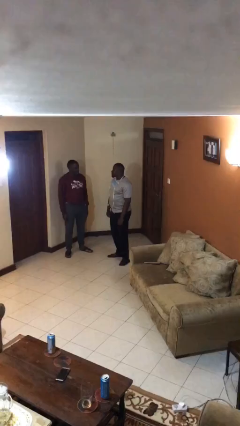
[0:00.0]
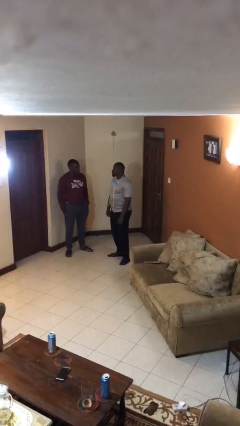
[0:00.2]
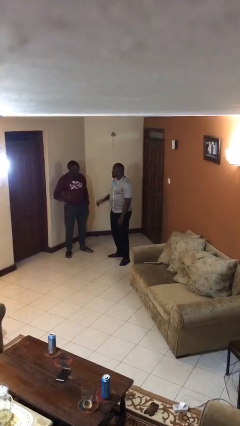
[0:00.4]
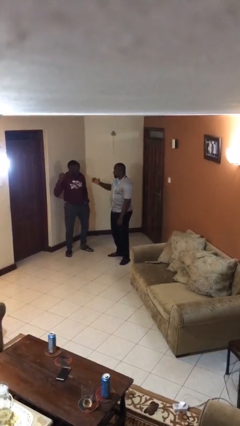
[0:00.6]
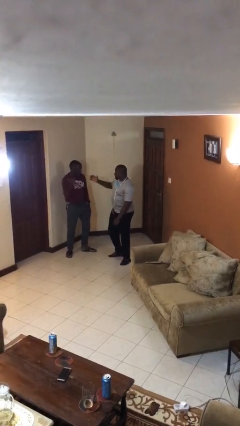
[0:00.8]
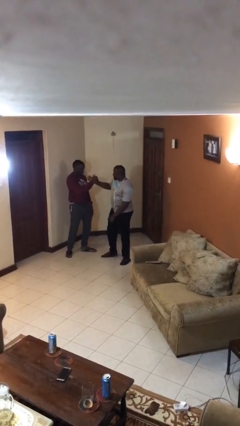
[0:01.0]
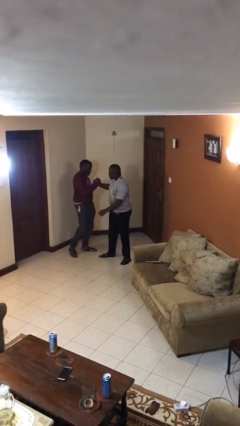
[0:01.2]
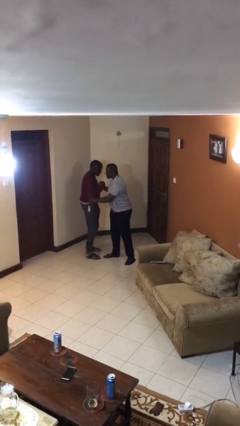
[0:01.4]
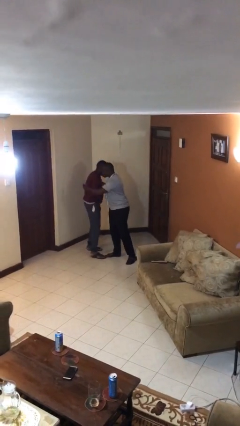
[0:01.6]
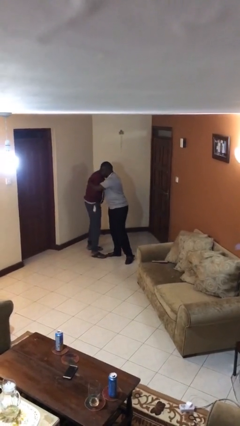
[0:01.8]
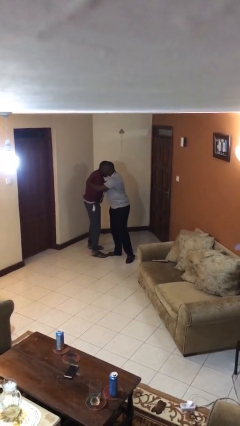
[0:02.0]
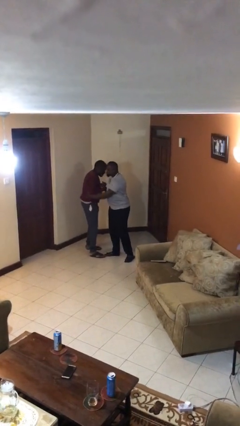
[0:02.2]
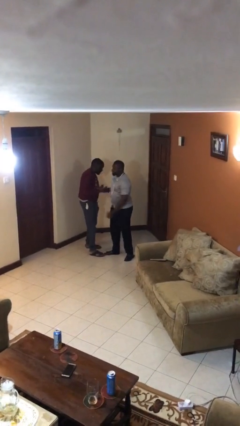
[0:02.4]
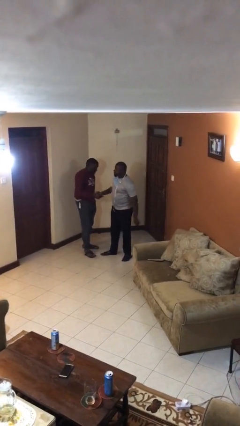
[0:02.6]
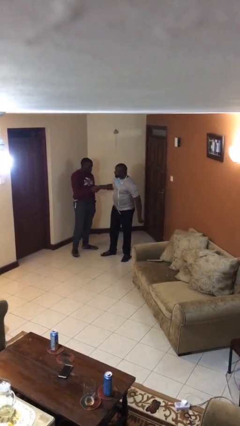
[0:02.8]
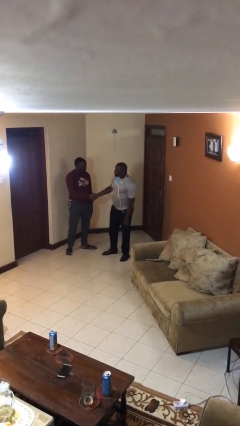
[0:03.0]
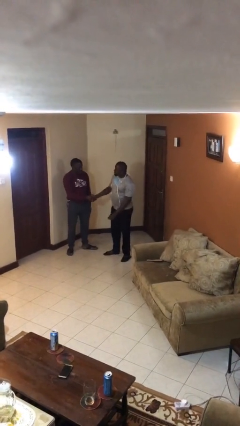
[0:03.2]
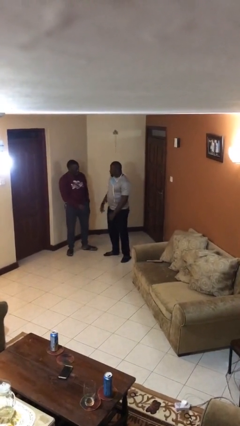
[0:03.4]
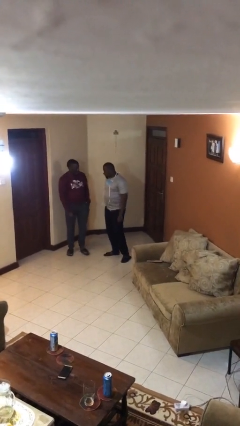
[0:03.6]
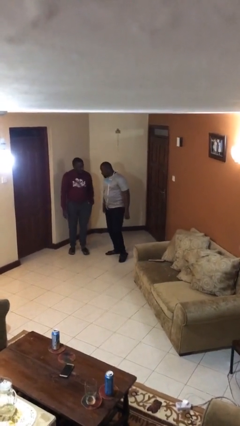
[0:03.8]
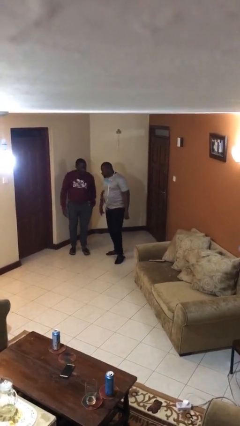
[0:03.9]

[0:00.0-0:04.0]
person embraces person

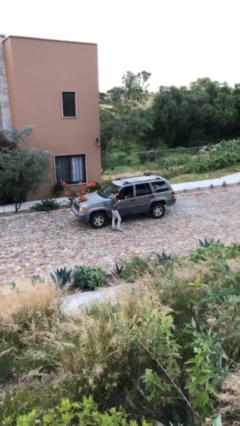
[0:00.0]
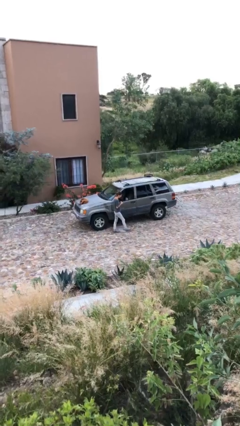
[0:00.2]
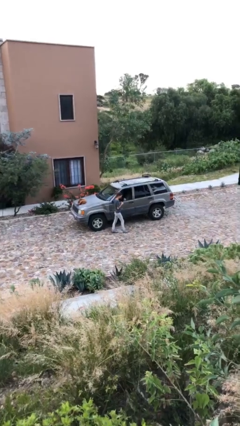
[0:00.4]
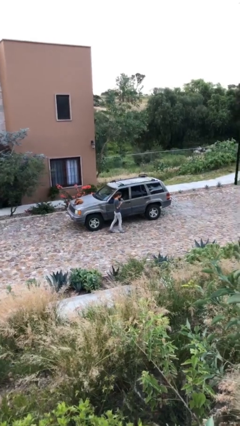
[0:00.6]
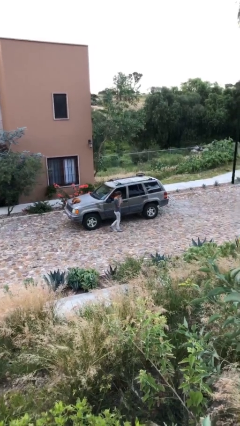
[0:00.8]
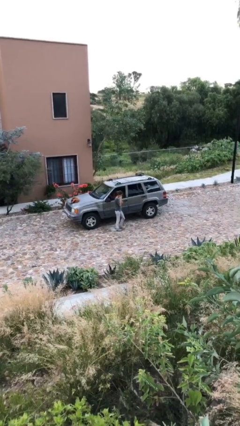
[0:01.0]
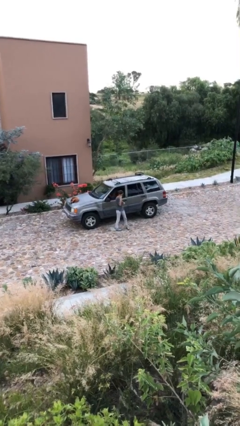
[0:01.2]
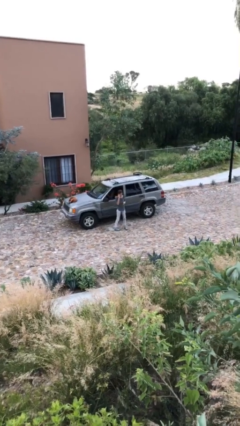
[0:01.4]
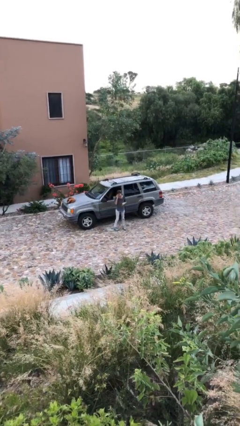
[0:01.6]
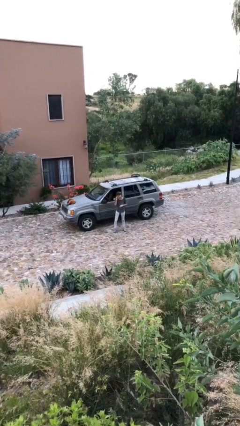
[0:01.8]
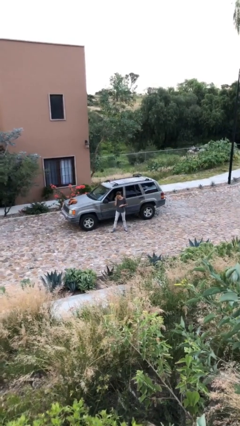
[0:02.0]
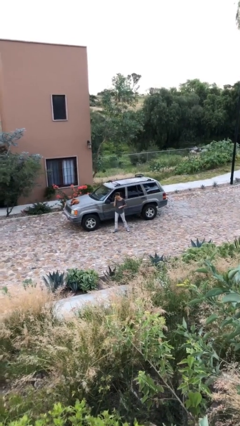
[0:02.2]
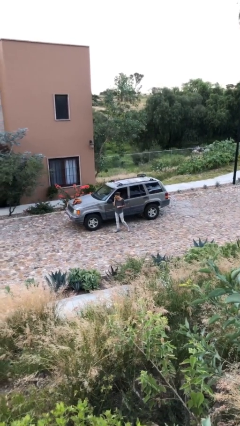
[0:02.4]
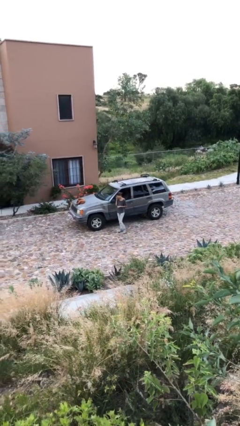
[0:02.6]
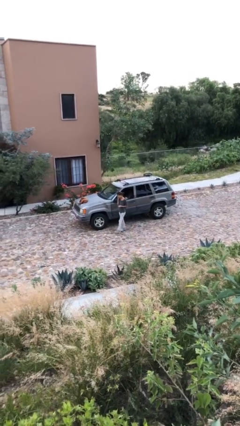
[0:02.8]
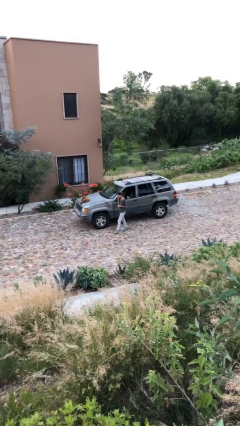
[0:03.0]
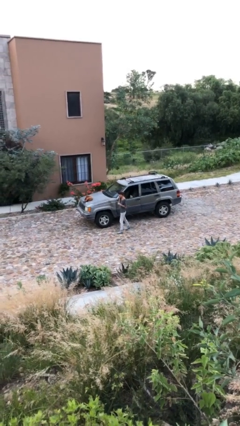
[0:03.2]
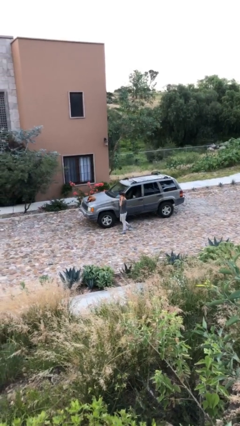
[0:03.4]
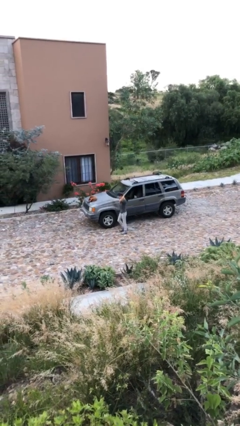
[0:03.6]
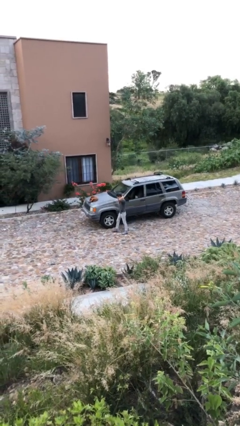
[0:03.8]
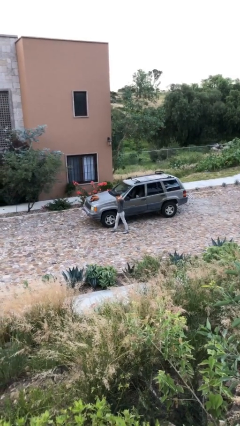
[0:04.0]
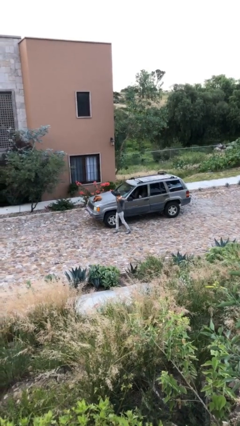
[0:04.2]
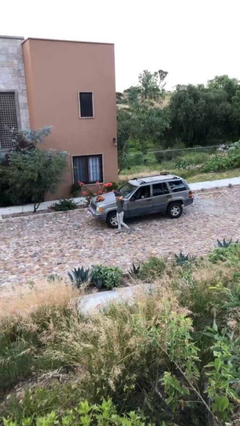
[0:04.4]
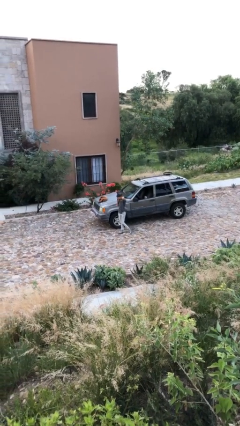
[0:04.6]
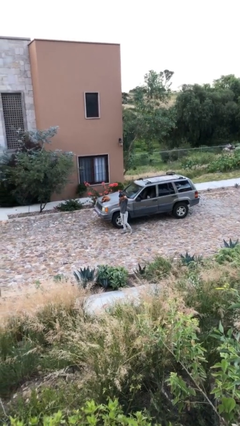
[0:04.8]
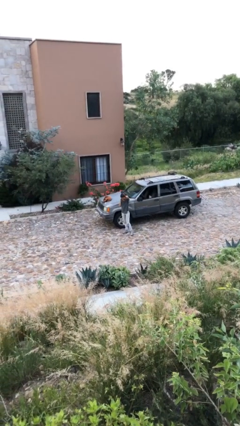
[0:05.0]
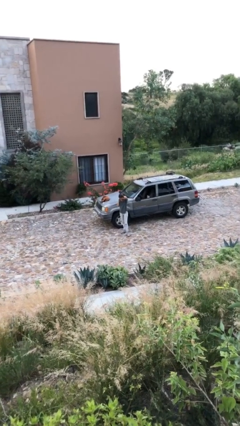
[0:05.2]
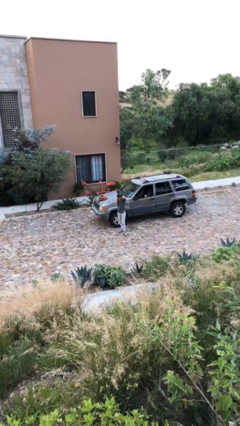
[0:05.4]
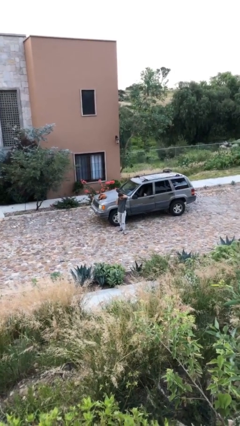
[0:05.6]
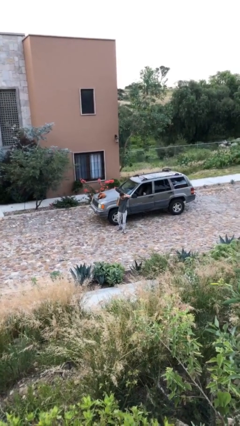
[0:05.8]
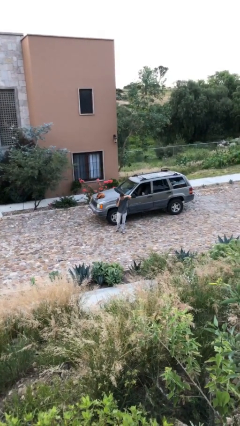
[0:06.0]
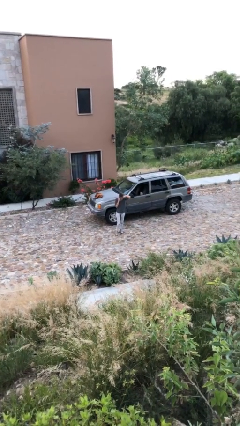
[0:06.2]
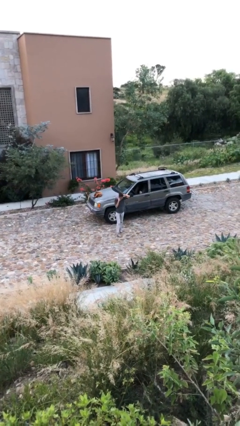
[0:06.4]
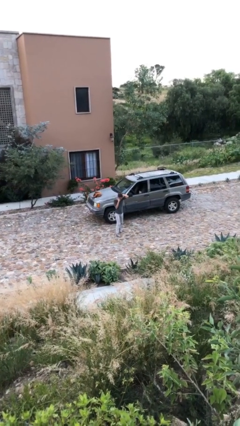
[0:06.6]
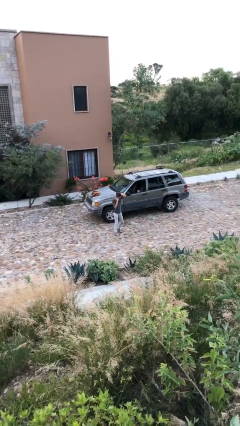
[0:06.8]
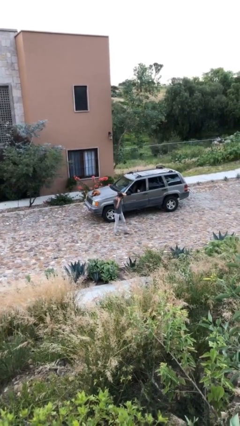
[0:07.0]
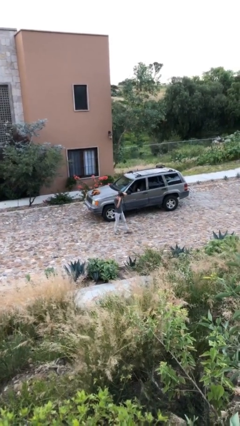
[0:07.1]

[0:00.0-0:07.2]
person talks on phone

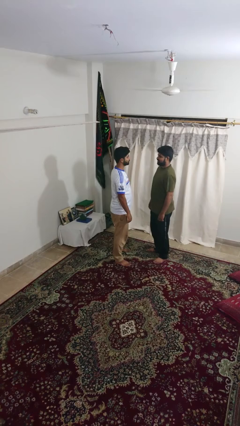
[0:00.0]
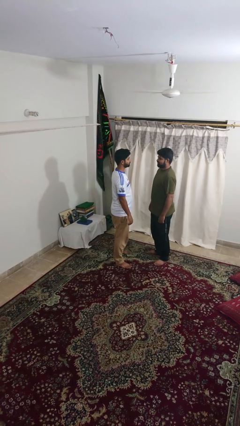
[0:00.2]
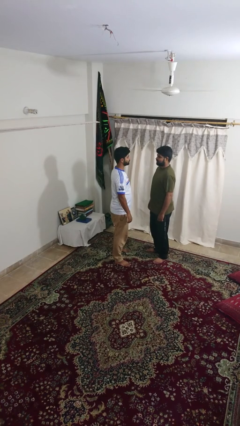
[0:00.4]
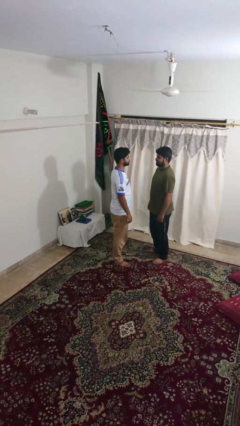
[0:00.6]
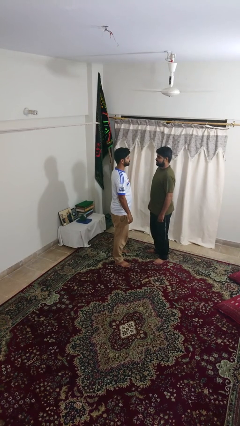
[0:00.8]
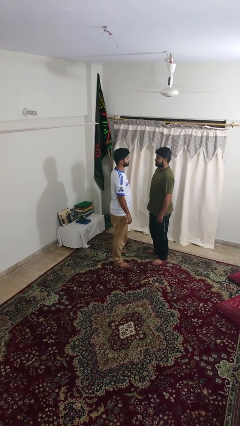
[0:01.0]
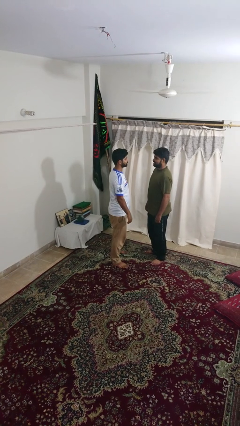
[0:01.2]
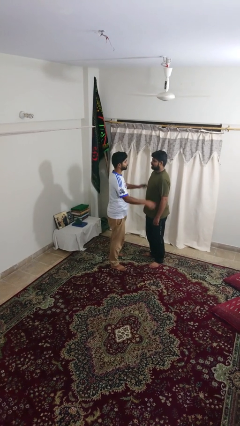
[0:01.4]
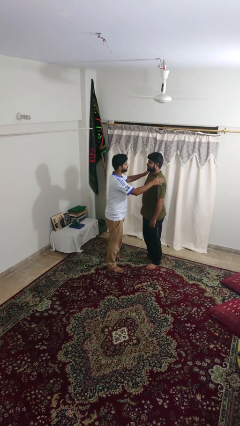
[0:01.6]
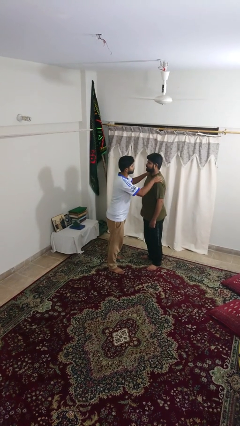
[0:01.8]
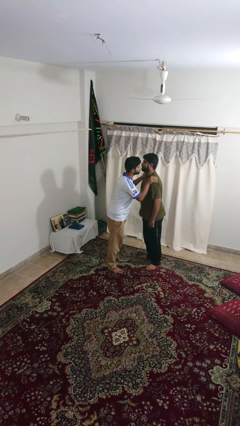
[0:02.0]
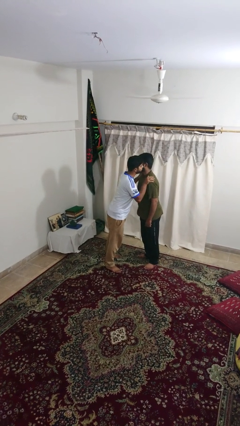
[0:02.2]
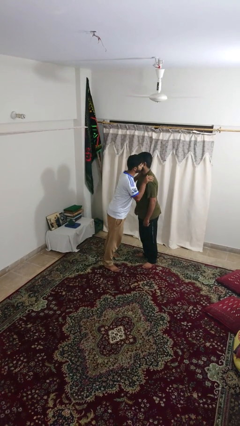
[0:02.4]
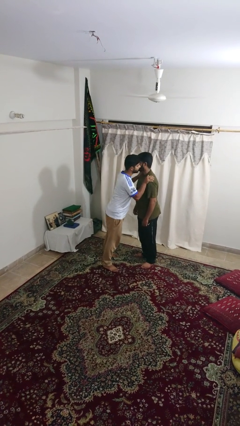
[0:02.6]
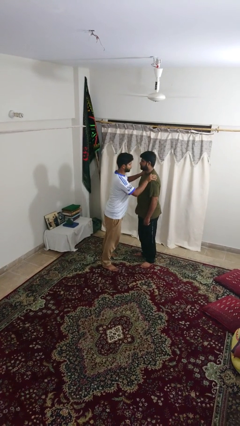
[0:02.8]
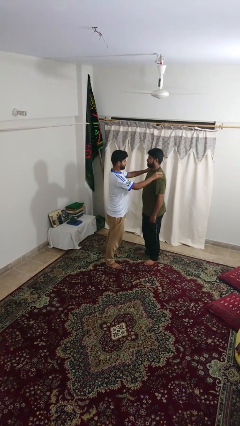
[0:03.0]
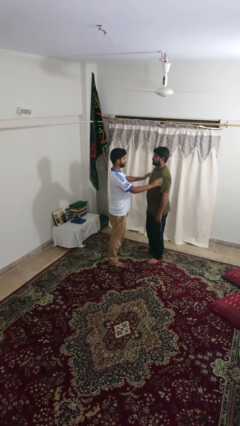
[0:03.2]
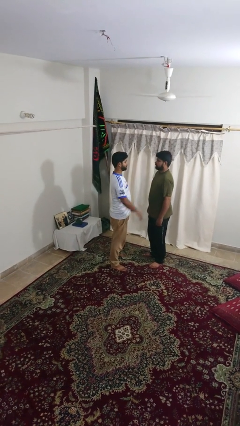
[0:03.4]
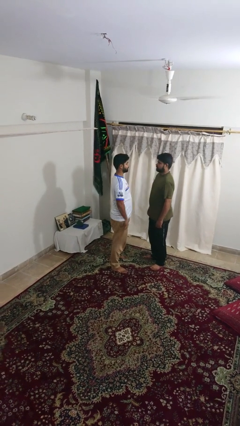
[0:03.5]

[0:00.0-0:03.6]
person kisses cheek of person

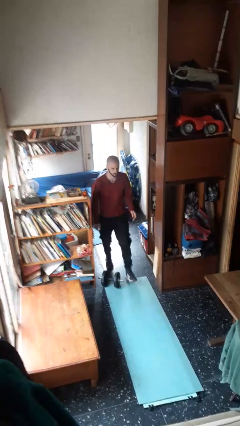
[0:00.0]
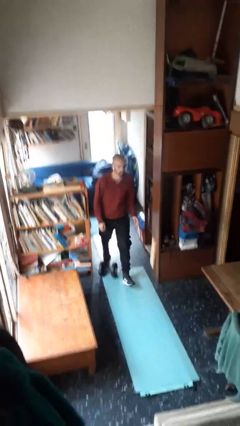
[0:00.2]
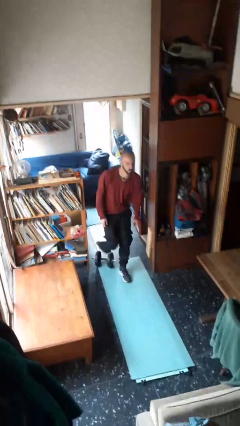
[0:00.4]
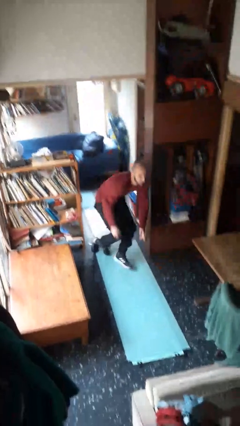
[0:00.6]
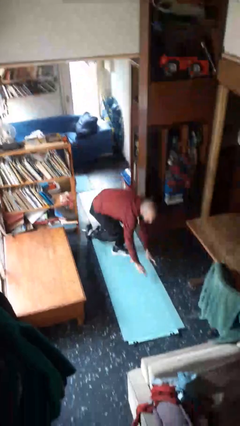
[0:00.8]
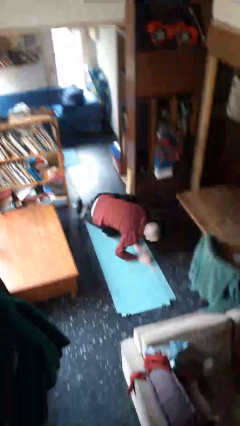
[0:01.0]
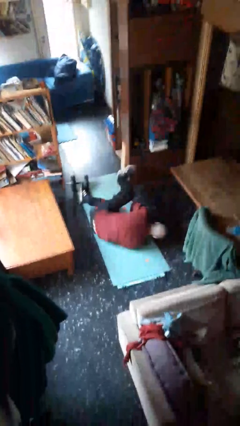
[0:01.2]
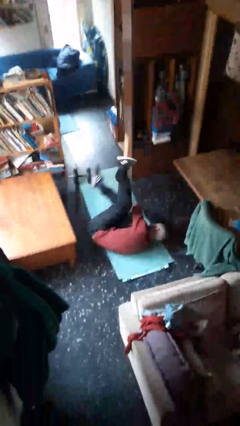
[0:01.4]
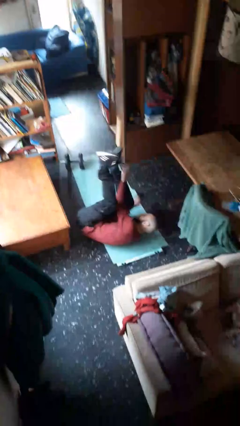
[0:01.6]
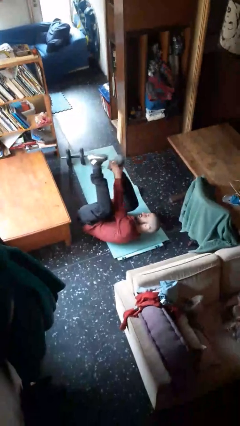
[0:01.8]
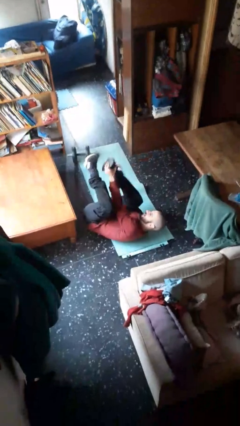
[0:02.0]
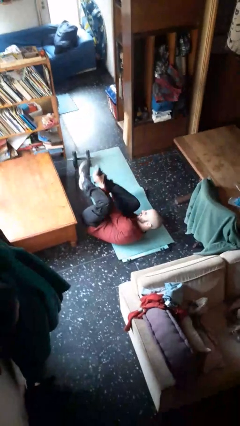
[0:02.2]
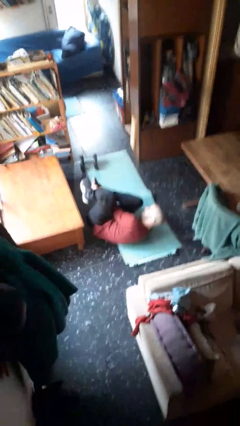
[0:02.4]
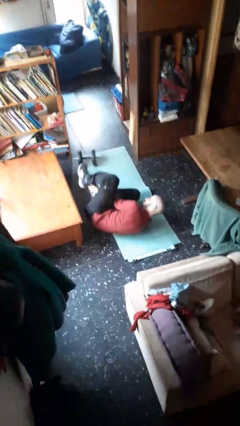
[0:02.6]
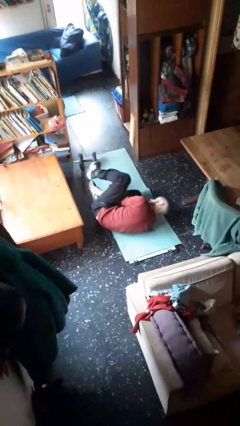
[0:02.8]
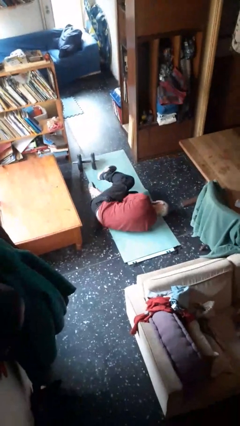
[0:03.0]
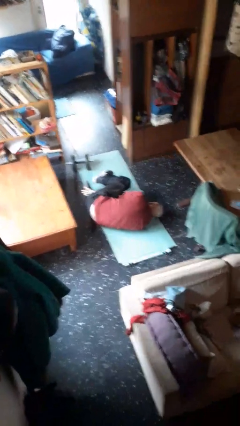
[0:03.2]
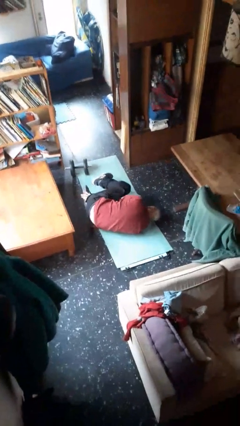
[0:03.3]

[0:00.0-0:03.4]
person trips on object on floor
